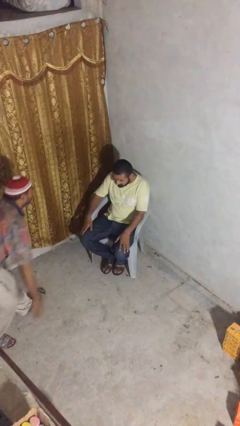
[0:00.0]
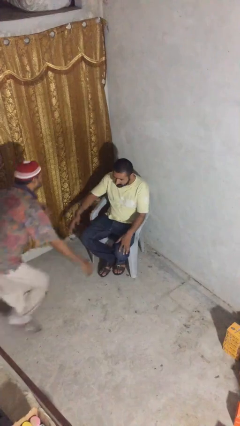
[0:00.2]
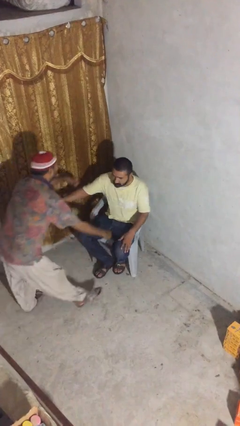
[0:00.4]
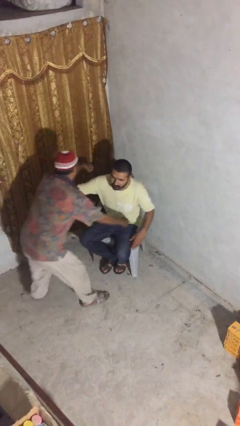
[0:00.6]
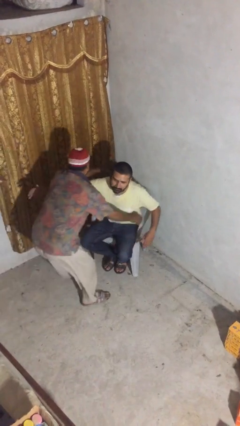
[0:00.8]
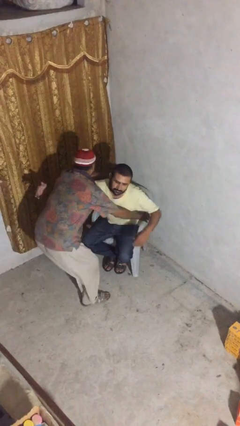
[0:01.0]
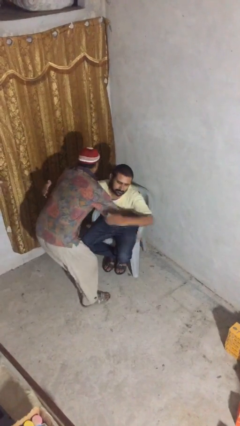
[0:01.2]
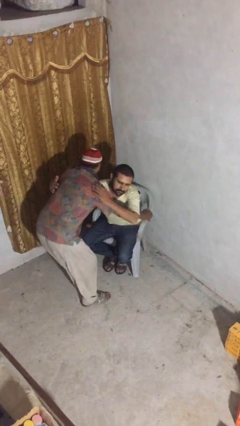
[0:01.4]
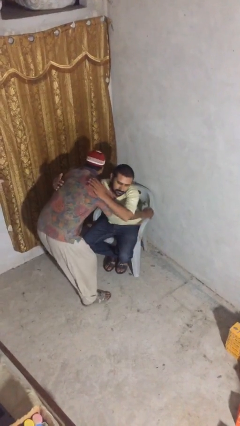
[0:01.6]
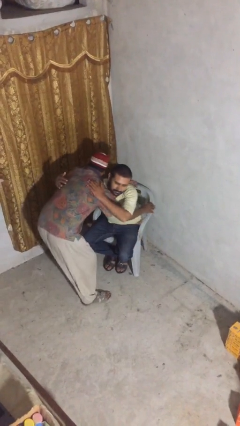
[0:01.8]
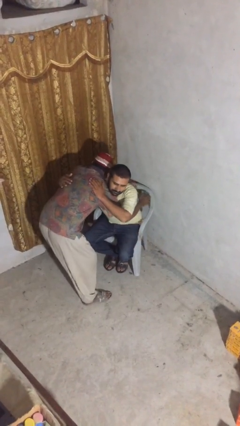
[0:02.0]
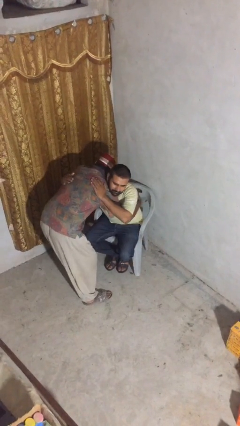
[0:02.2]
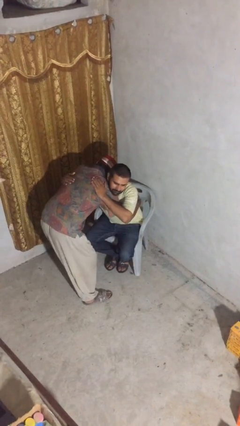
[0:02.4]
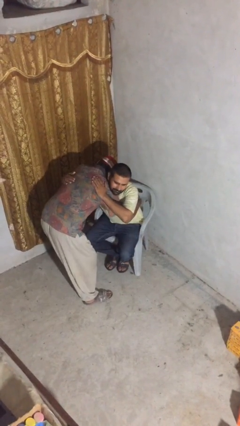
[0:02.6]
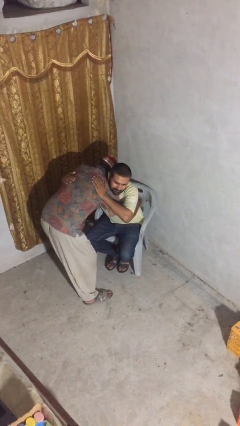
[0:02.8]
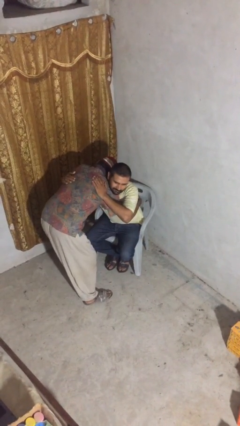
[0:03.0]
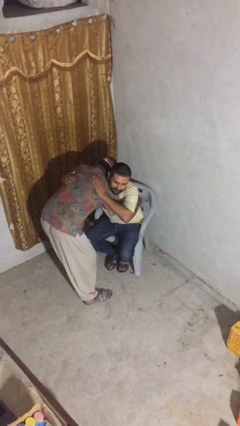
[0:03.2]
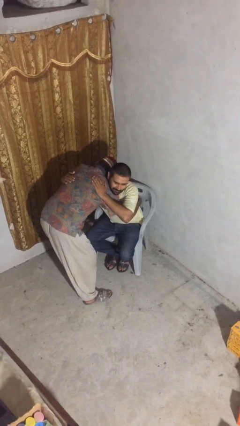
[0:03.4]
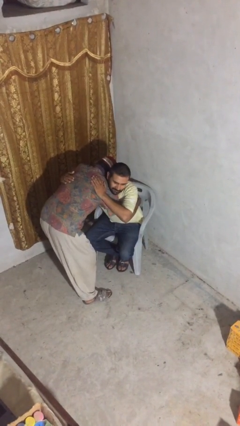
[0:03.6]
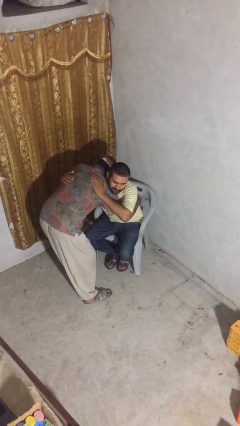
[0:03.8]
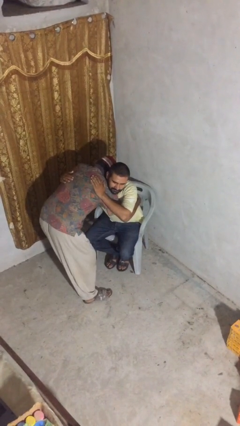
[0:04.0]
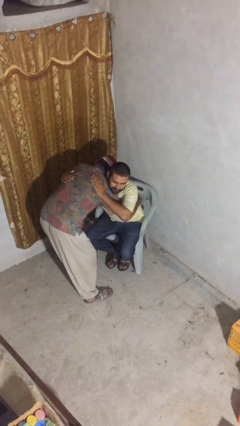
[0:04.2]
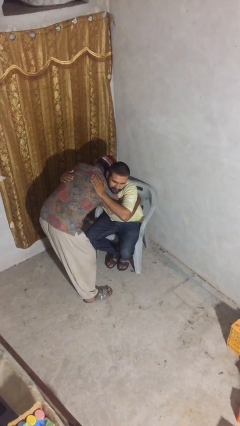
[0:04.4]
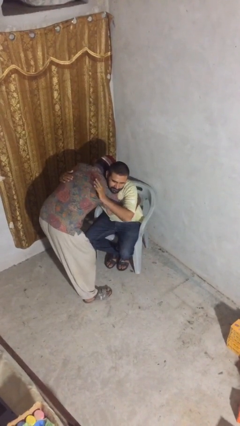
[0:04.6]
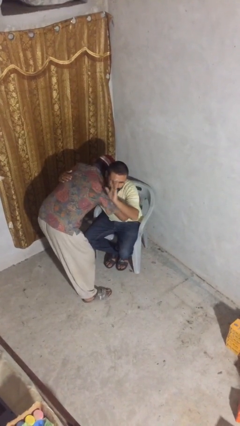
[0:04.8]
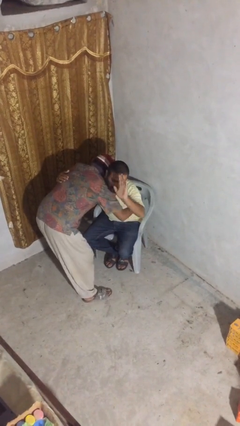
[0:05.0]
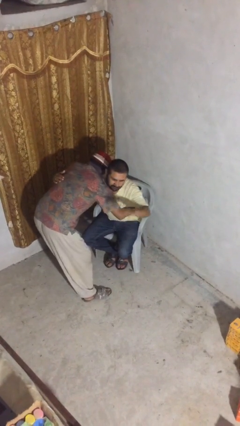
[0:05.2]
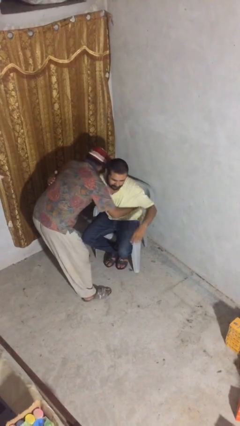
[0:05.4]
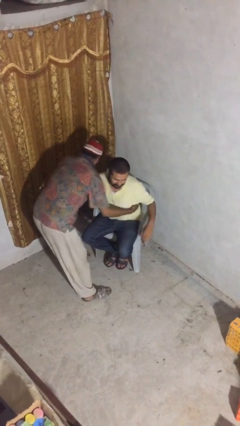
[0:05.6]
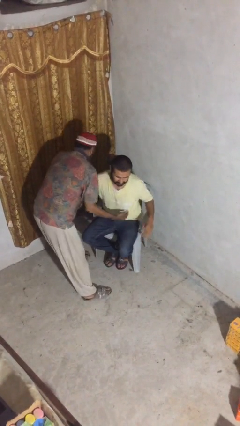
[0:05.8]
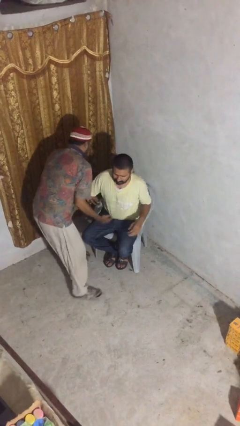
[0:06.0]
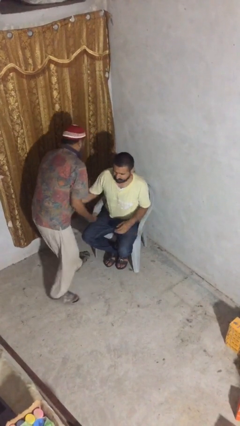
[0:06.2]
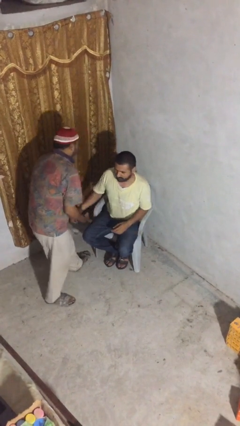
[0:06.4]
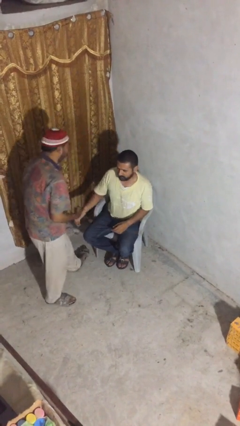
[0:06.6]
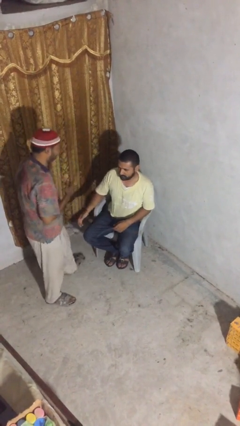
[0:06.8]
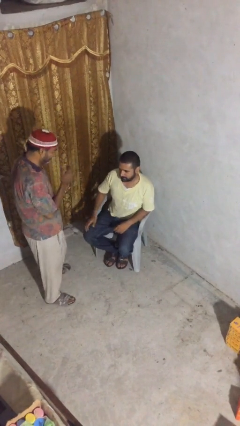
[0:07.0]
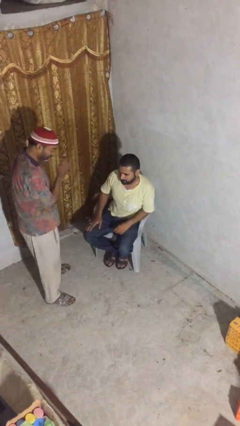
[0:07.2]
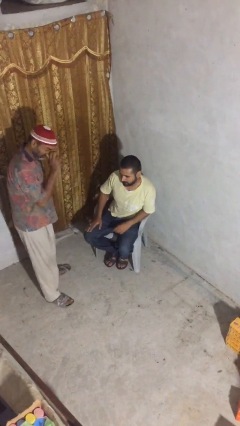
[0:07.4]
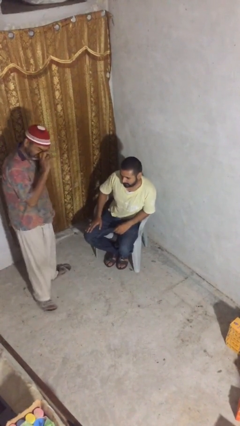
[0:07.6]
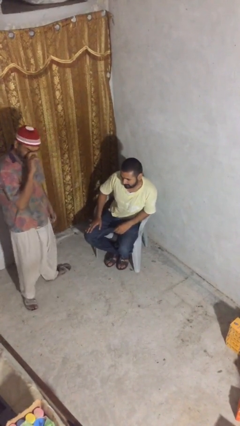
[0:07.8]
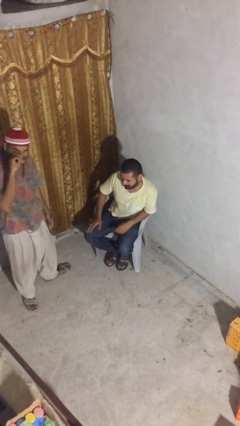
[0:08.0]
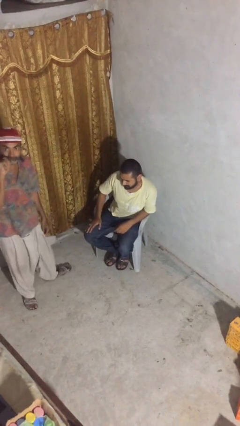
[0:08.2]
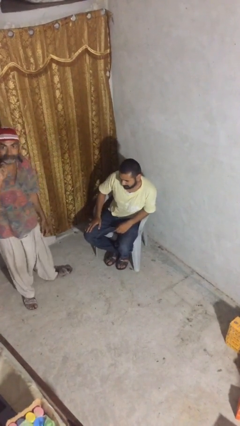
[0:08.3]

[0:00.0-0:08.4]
person embraces person

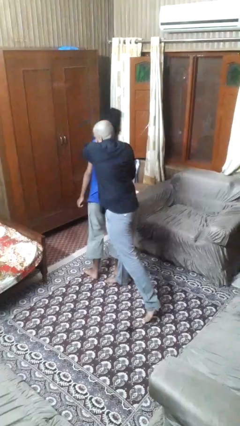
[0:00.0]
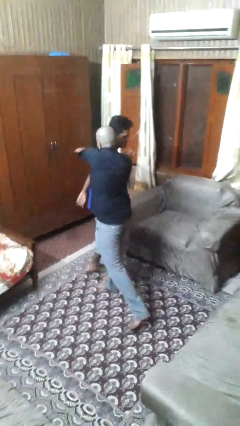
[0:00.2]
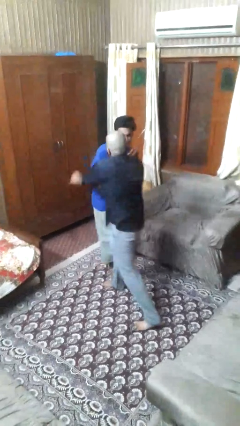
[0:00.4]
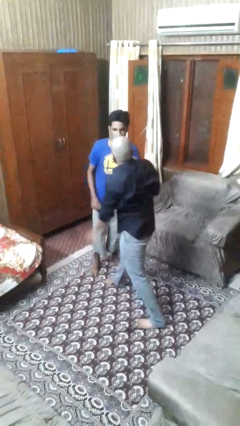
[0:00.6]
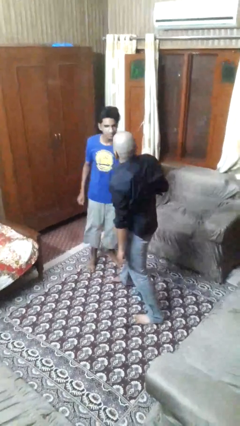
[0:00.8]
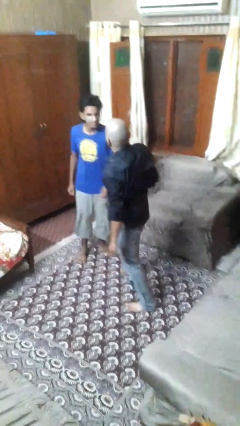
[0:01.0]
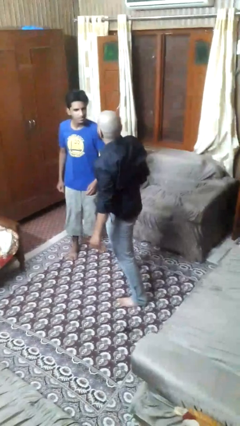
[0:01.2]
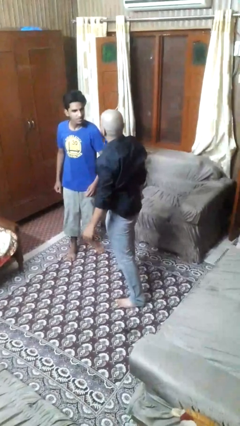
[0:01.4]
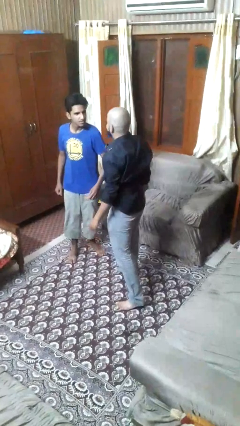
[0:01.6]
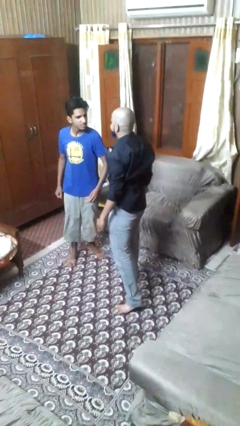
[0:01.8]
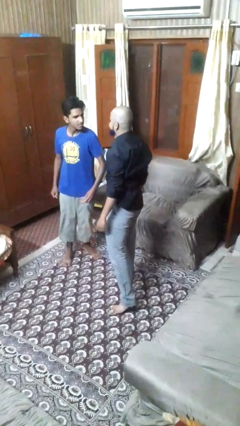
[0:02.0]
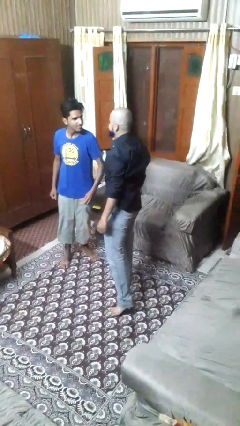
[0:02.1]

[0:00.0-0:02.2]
person spins person around

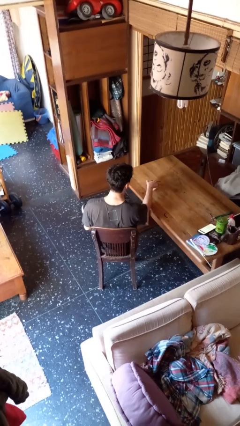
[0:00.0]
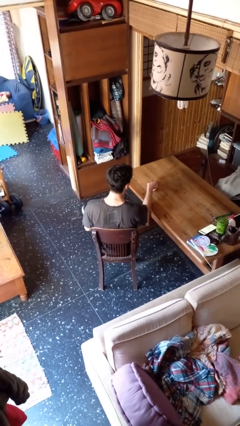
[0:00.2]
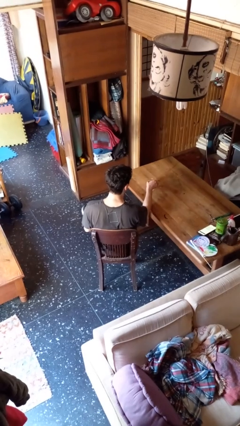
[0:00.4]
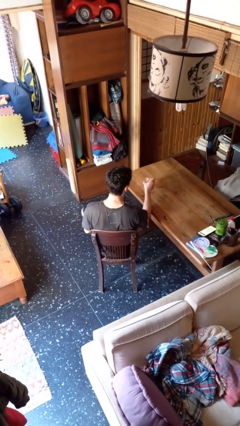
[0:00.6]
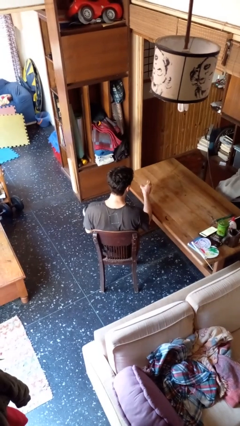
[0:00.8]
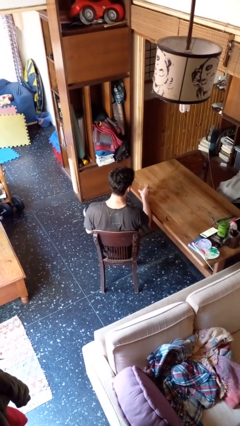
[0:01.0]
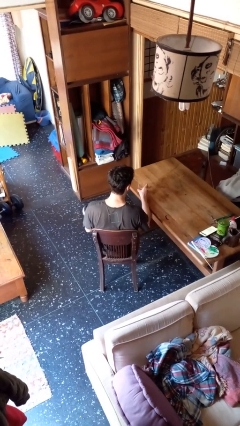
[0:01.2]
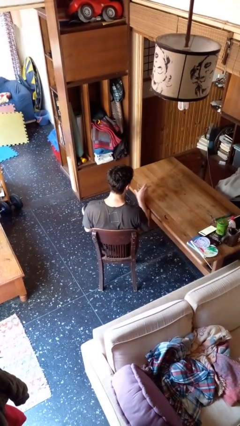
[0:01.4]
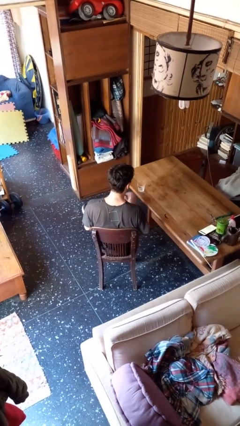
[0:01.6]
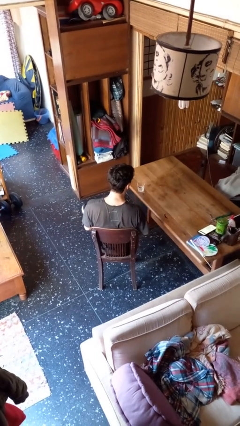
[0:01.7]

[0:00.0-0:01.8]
person sets upright glass

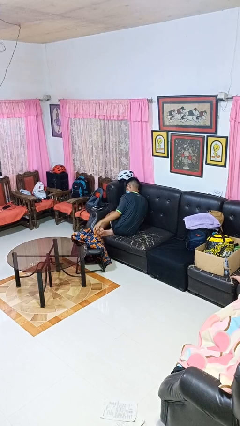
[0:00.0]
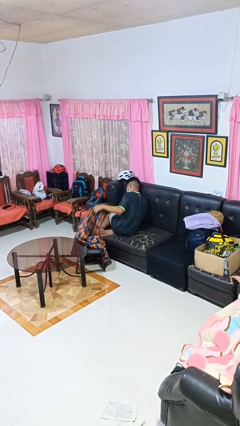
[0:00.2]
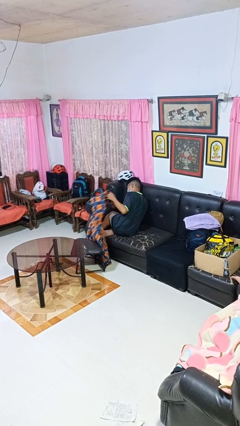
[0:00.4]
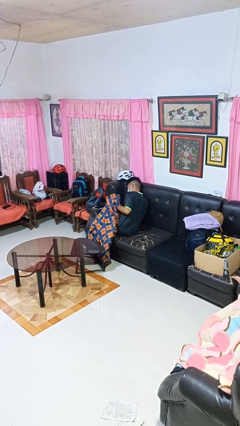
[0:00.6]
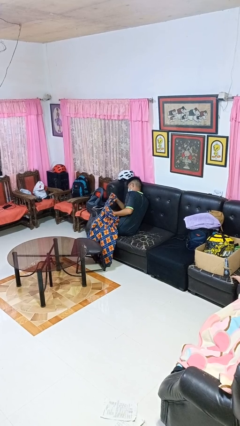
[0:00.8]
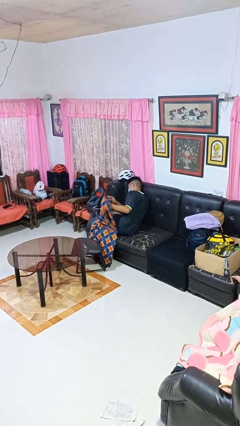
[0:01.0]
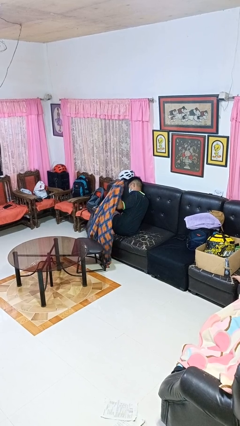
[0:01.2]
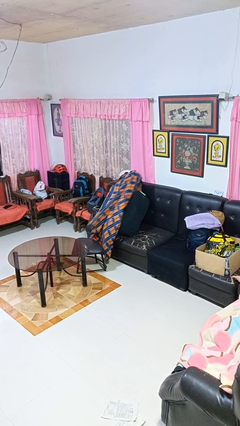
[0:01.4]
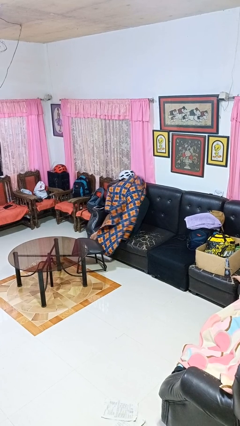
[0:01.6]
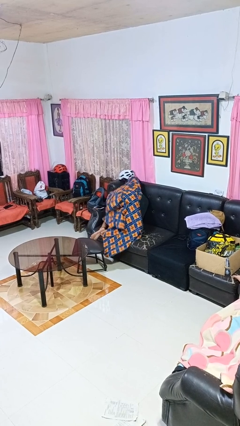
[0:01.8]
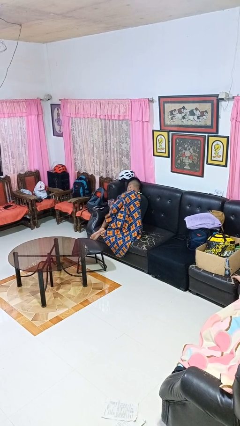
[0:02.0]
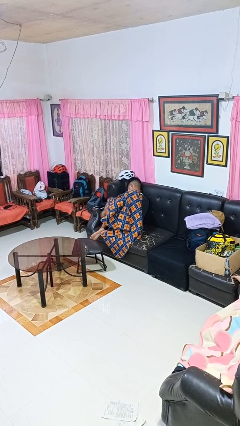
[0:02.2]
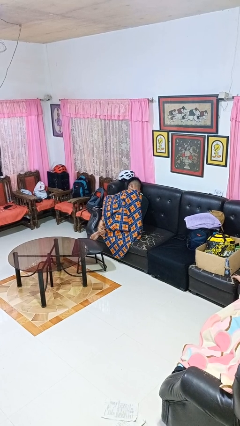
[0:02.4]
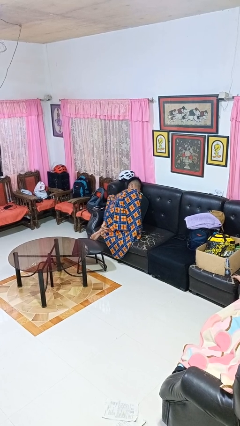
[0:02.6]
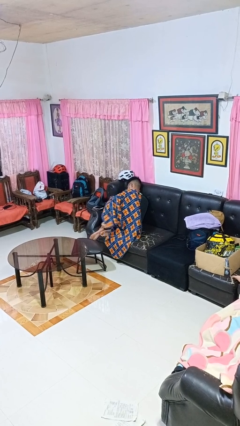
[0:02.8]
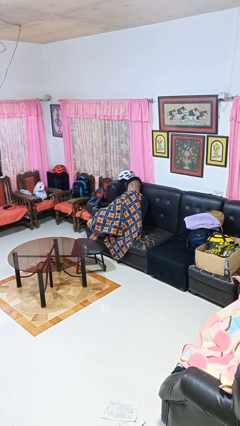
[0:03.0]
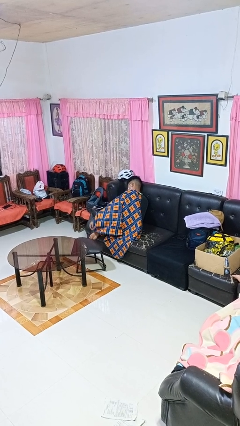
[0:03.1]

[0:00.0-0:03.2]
person covers with blanket

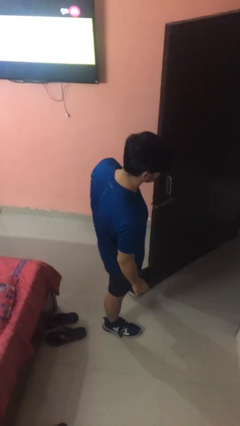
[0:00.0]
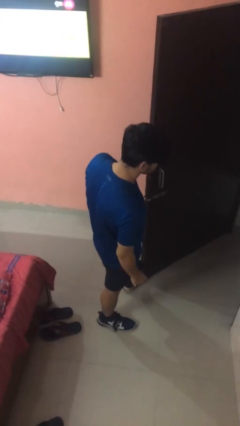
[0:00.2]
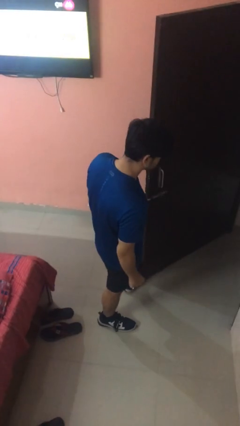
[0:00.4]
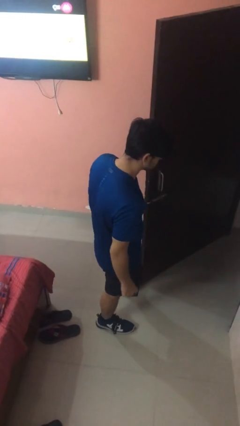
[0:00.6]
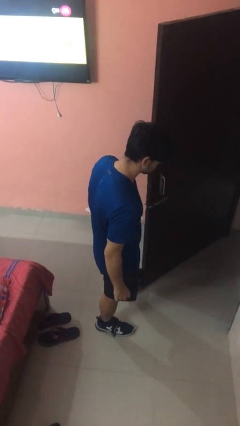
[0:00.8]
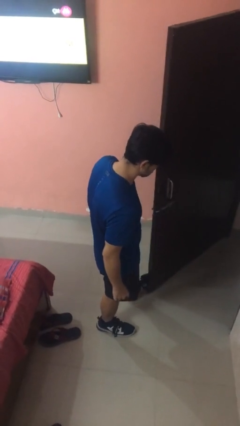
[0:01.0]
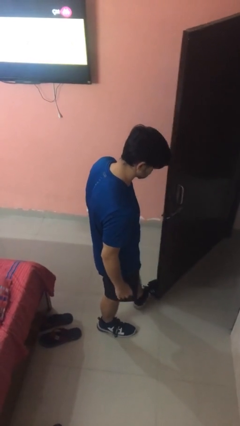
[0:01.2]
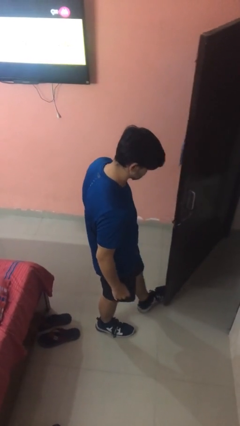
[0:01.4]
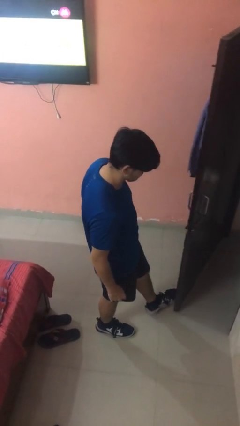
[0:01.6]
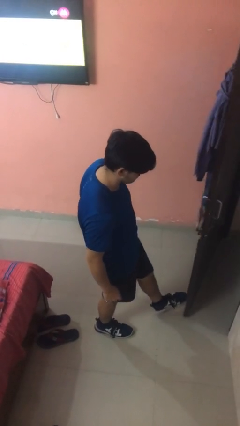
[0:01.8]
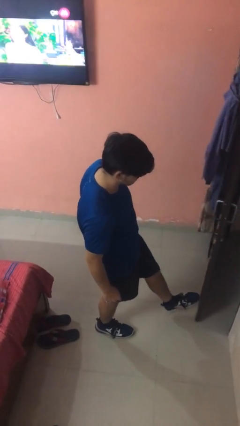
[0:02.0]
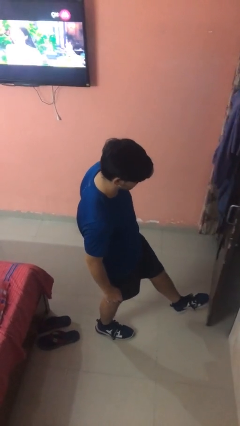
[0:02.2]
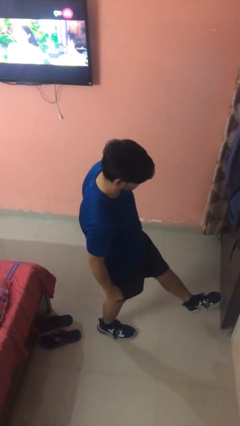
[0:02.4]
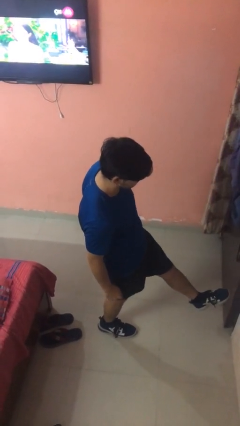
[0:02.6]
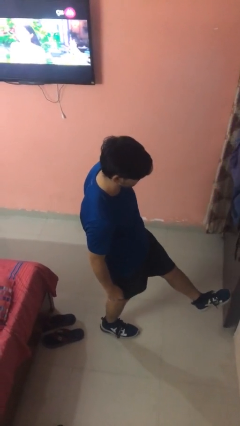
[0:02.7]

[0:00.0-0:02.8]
person closes door with foot
